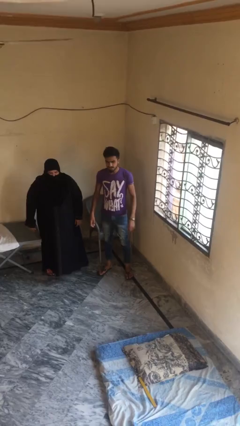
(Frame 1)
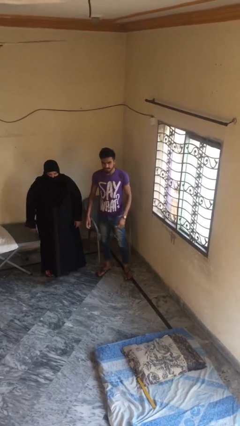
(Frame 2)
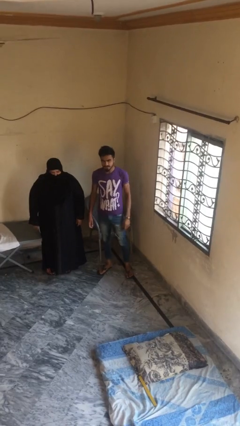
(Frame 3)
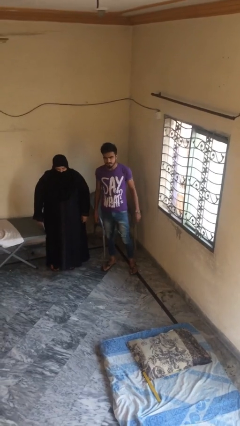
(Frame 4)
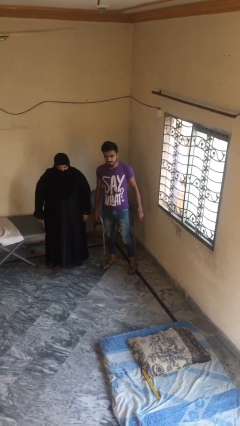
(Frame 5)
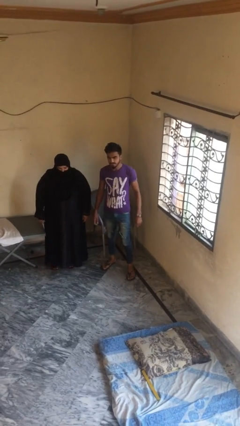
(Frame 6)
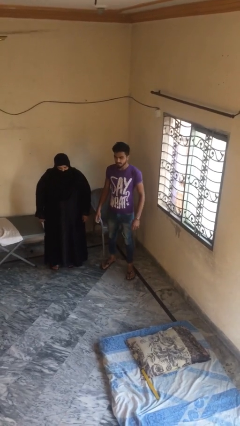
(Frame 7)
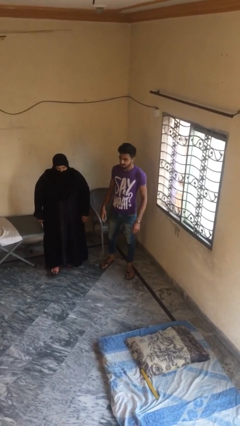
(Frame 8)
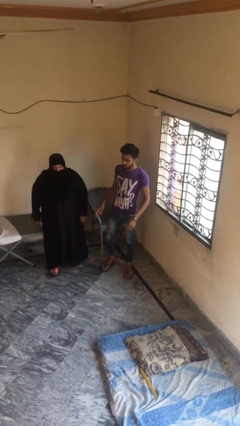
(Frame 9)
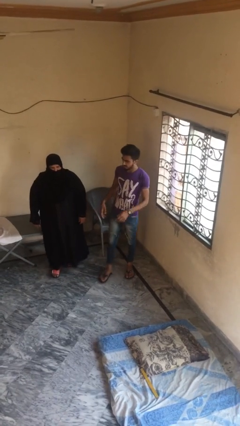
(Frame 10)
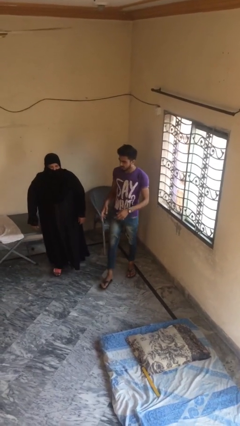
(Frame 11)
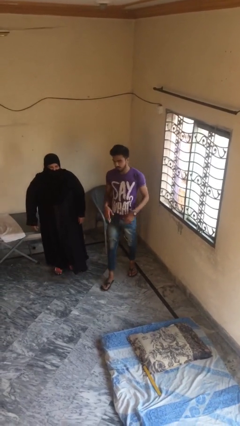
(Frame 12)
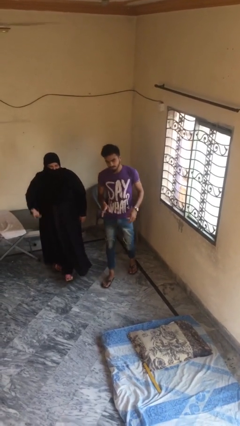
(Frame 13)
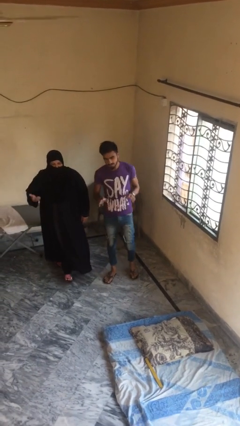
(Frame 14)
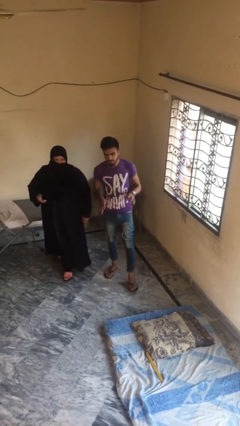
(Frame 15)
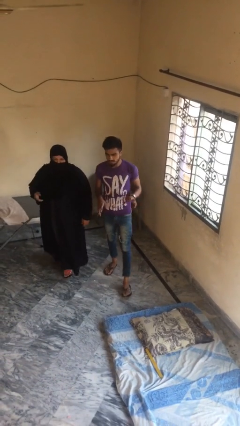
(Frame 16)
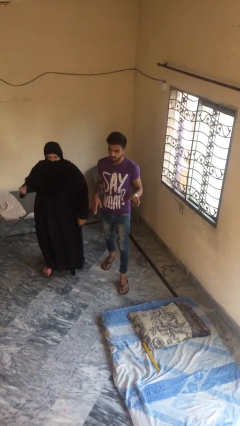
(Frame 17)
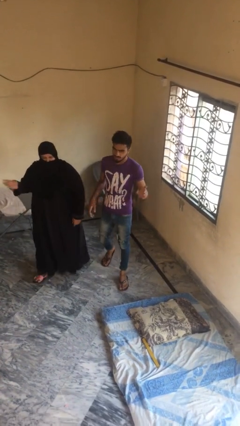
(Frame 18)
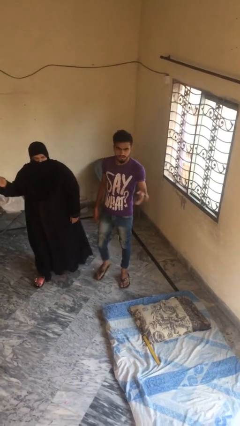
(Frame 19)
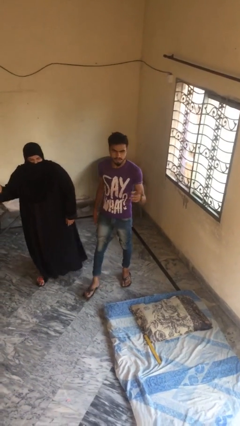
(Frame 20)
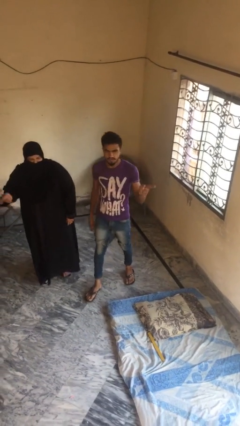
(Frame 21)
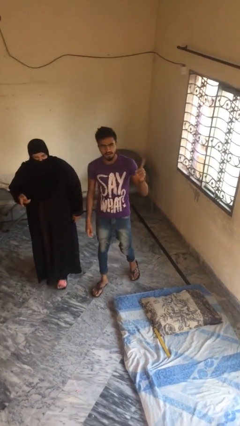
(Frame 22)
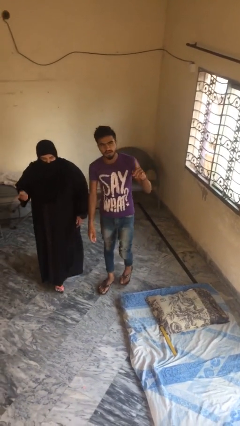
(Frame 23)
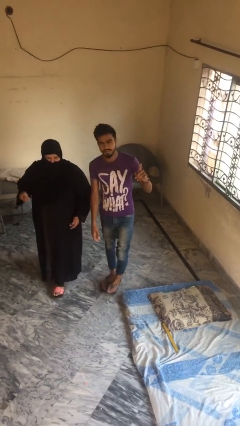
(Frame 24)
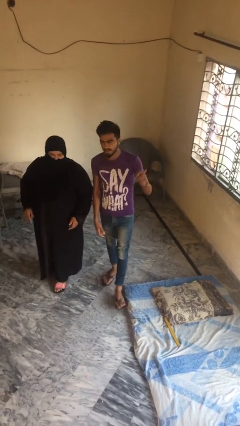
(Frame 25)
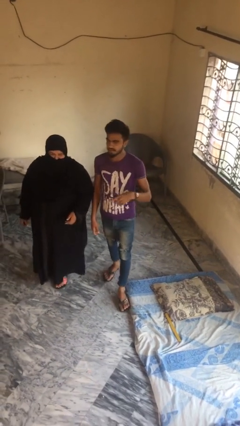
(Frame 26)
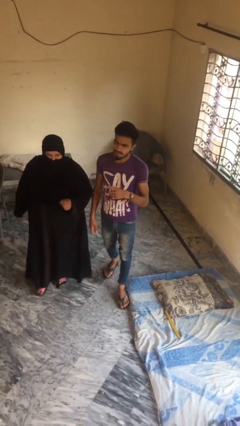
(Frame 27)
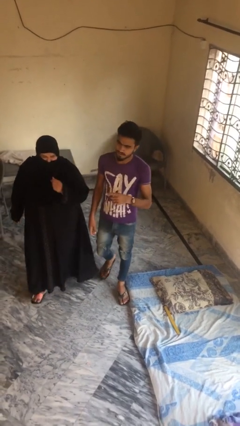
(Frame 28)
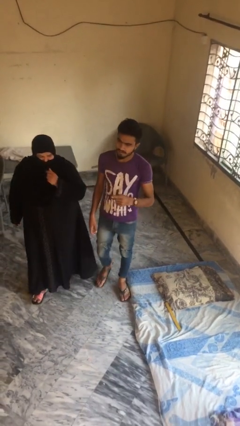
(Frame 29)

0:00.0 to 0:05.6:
person talks to person

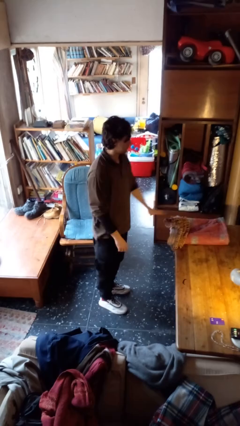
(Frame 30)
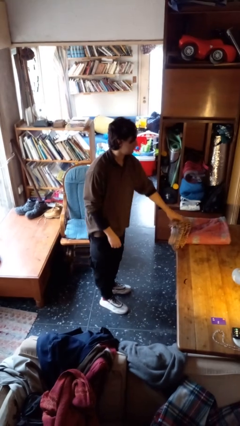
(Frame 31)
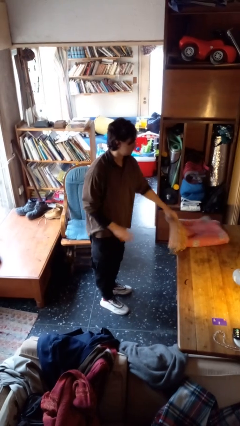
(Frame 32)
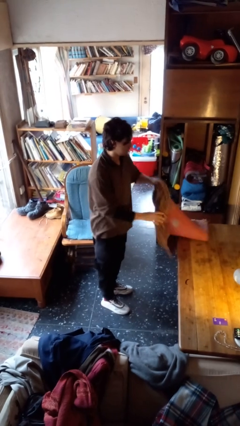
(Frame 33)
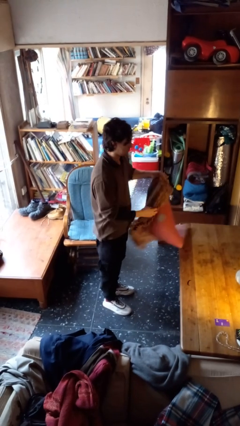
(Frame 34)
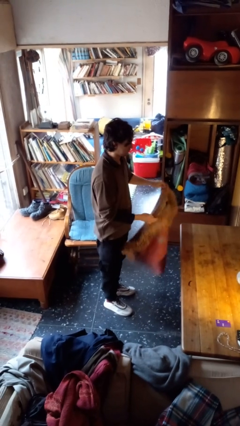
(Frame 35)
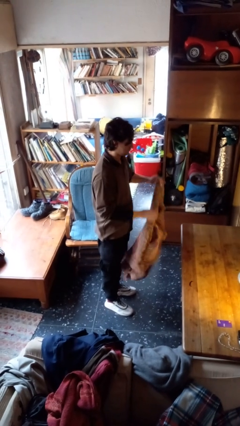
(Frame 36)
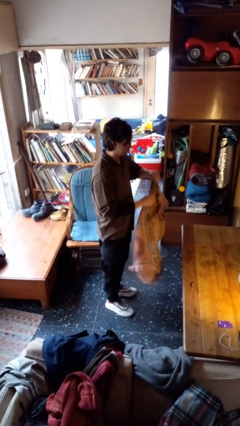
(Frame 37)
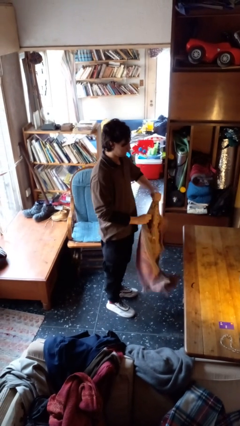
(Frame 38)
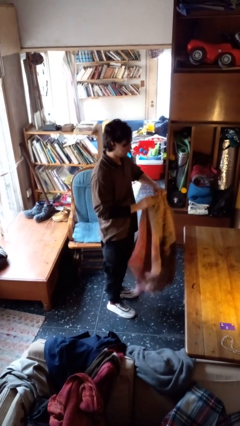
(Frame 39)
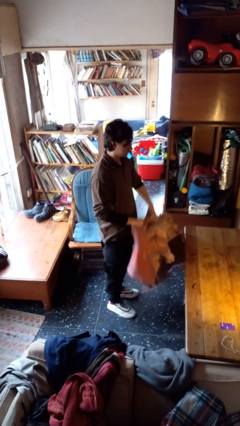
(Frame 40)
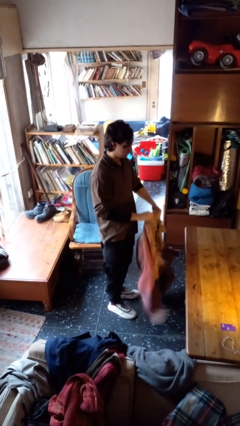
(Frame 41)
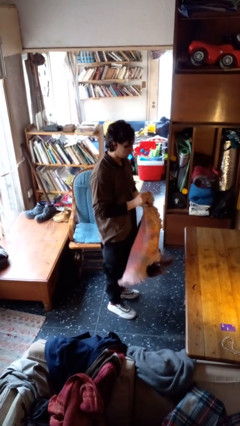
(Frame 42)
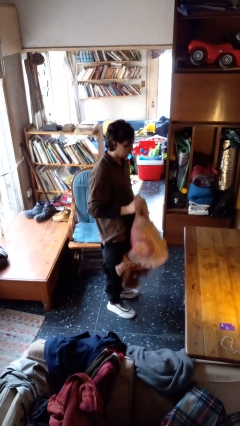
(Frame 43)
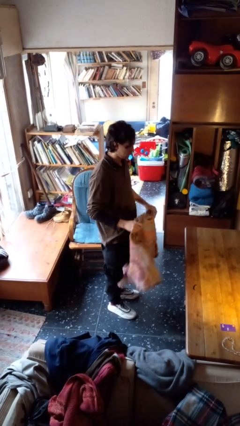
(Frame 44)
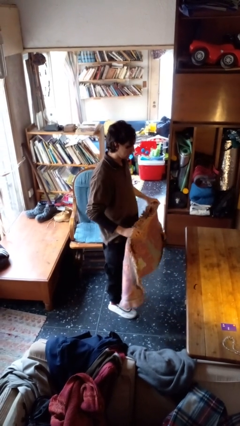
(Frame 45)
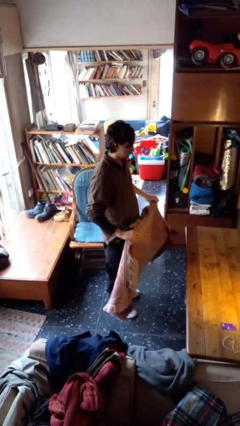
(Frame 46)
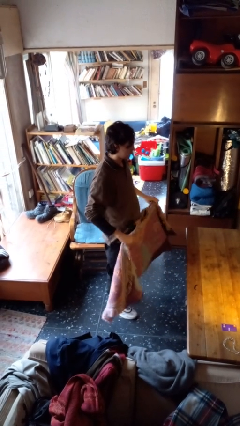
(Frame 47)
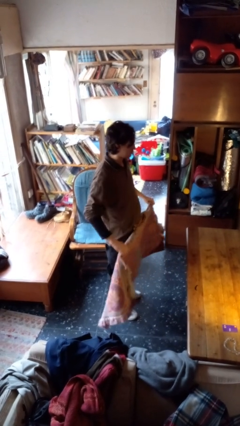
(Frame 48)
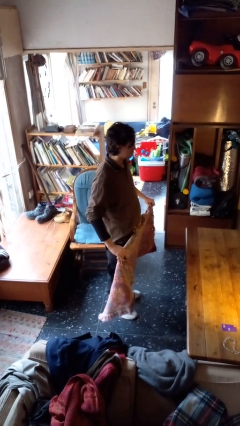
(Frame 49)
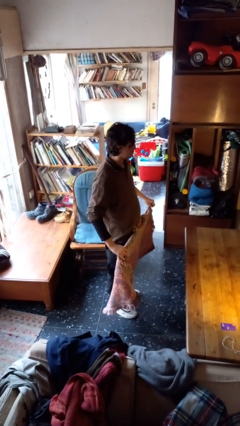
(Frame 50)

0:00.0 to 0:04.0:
person unfolds blanket

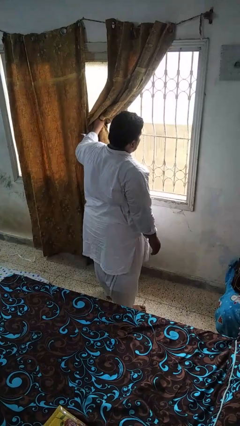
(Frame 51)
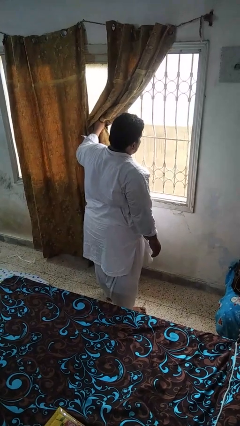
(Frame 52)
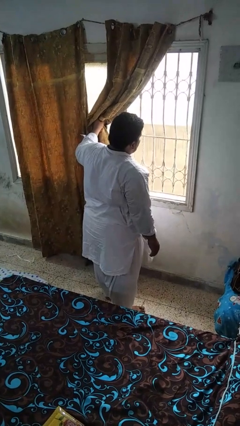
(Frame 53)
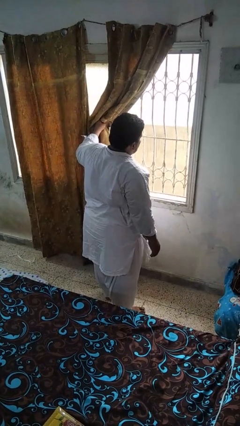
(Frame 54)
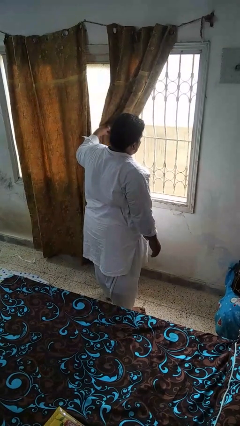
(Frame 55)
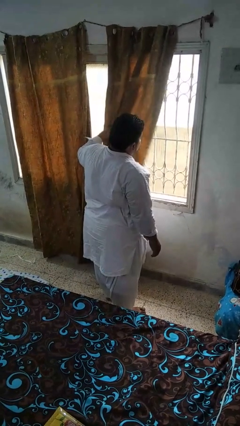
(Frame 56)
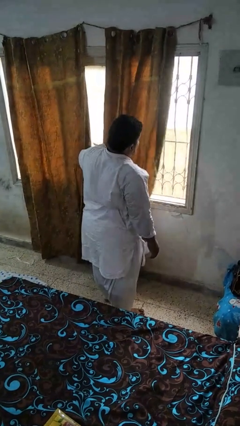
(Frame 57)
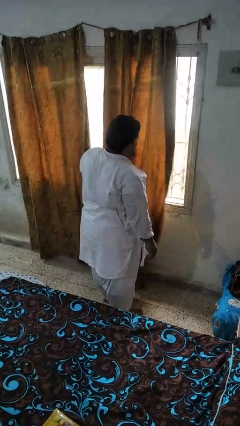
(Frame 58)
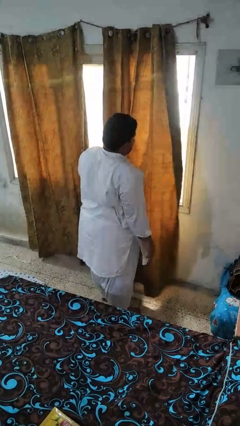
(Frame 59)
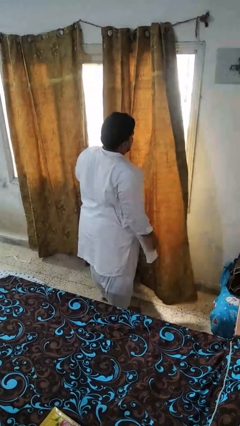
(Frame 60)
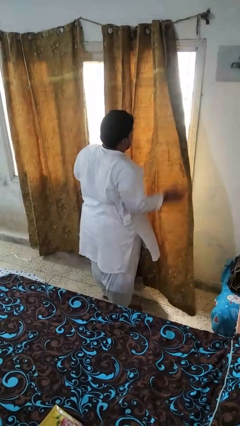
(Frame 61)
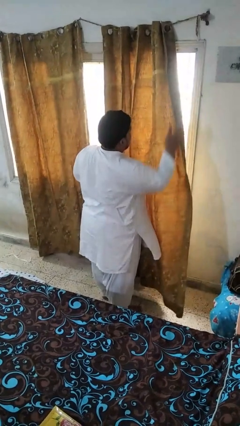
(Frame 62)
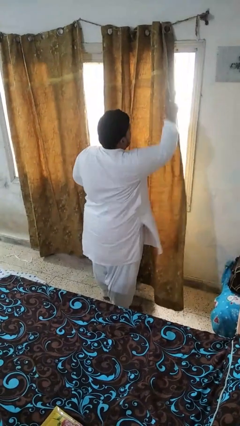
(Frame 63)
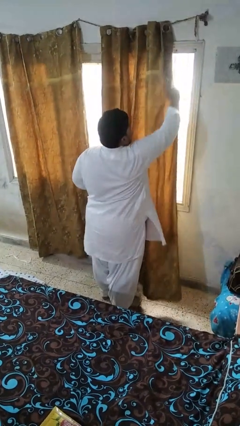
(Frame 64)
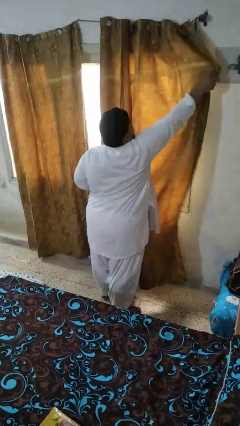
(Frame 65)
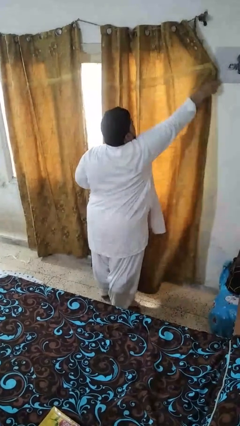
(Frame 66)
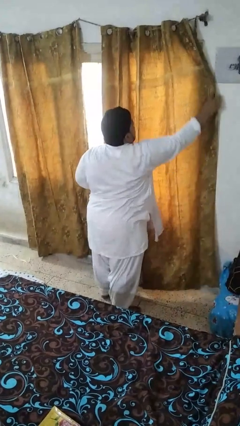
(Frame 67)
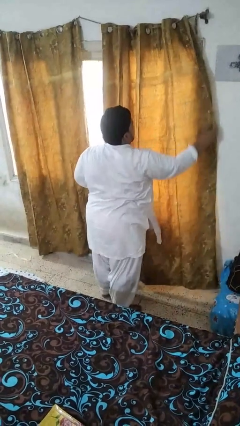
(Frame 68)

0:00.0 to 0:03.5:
person closes curtains

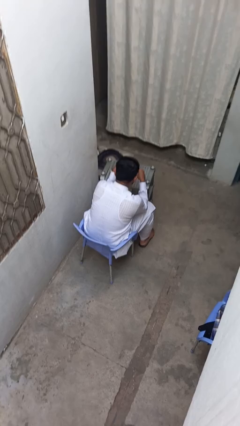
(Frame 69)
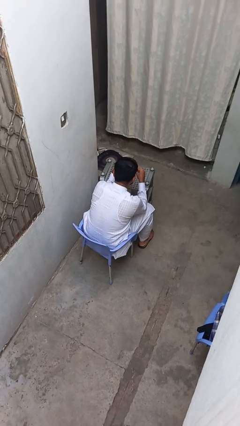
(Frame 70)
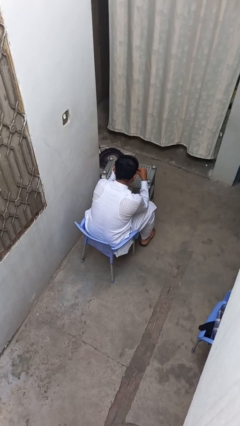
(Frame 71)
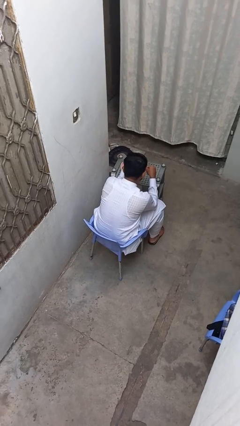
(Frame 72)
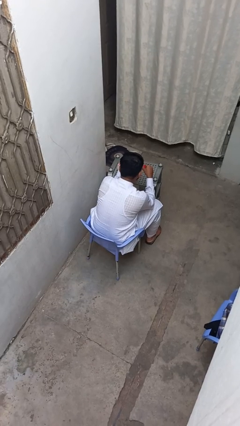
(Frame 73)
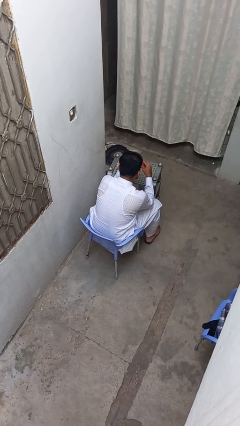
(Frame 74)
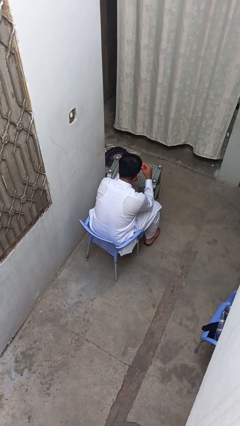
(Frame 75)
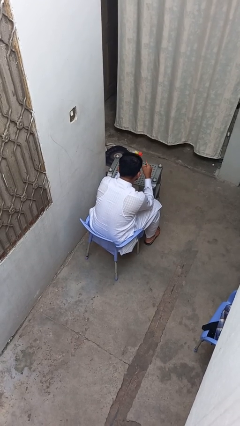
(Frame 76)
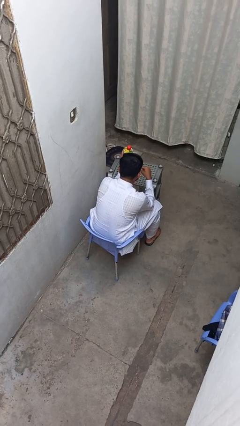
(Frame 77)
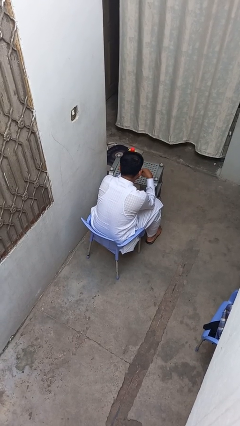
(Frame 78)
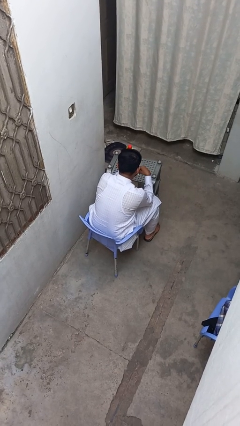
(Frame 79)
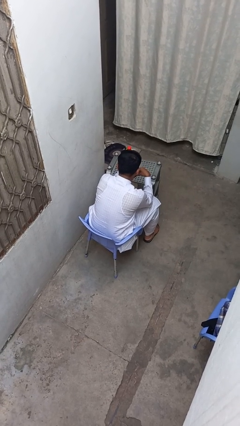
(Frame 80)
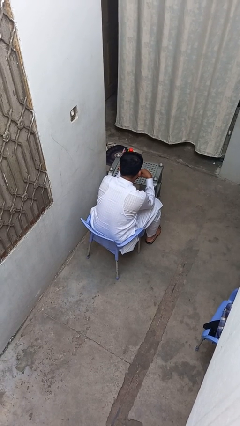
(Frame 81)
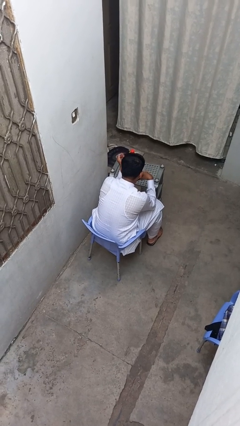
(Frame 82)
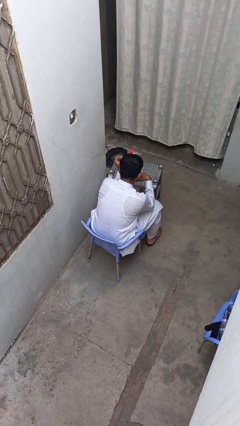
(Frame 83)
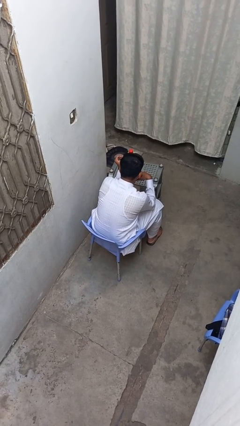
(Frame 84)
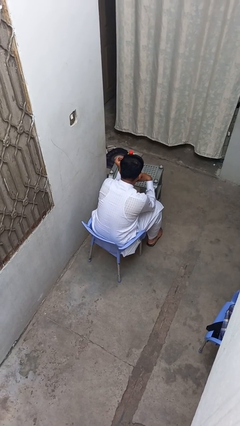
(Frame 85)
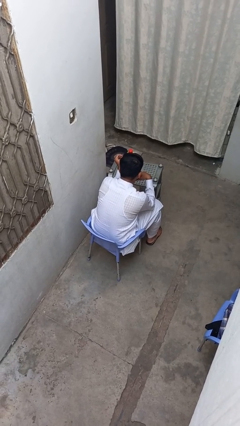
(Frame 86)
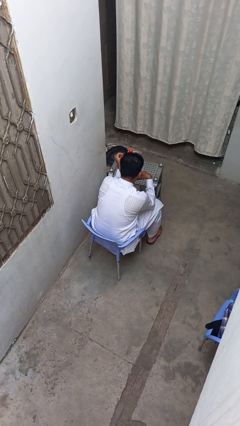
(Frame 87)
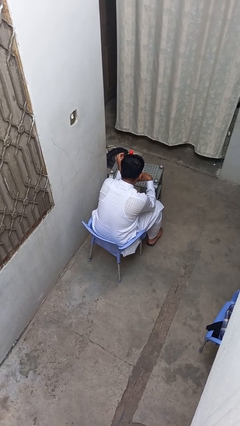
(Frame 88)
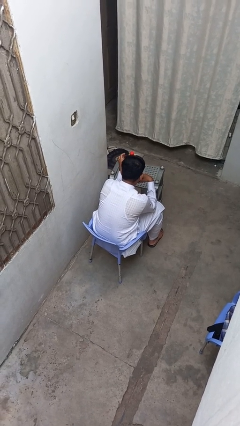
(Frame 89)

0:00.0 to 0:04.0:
person screws lid to bottle

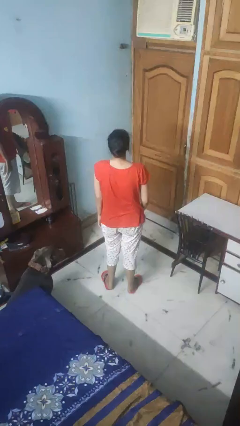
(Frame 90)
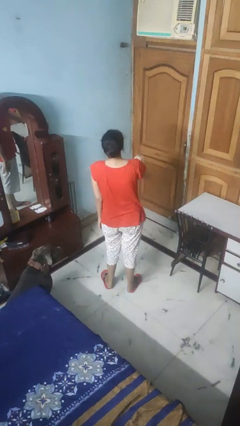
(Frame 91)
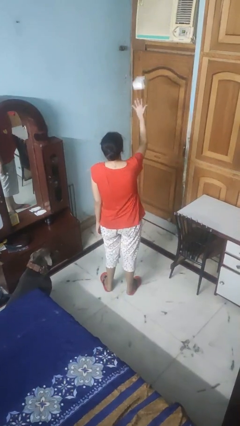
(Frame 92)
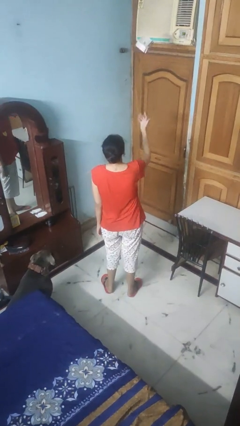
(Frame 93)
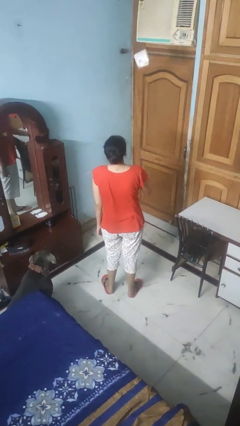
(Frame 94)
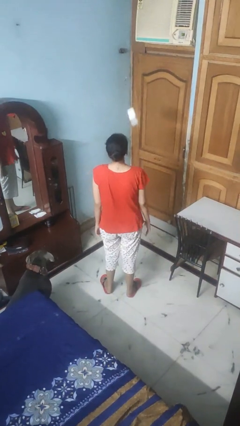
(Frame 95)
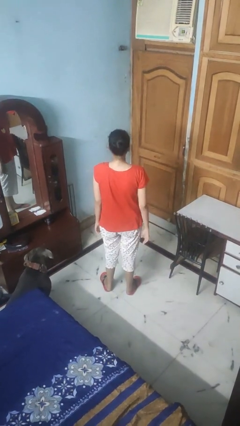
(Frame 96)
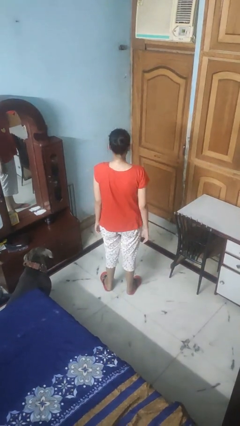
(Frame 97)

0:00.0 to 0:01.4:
person throws object into air
